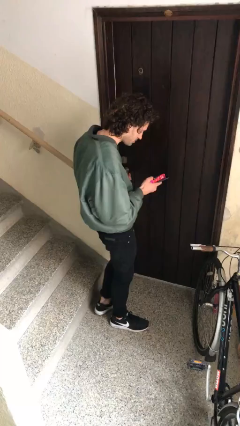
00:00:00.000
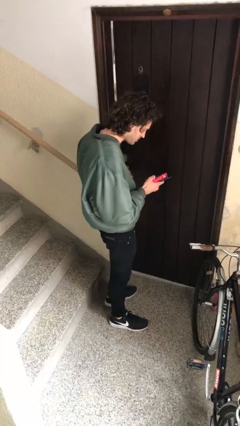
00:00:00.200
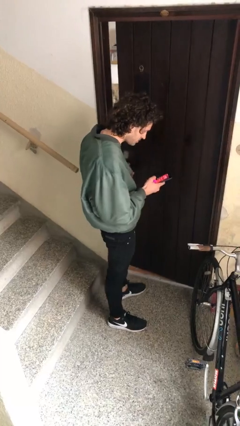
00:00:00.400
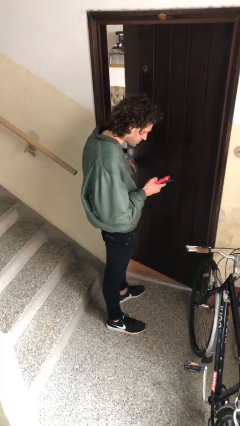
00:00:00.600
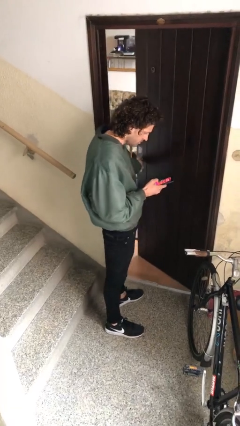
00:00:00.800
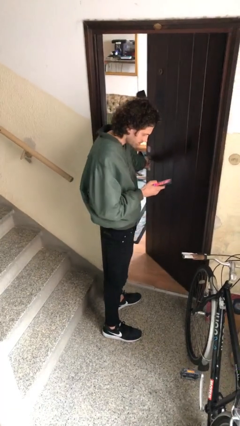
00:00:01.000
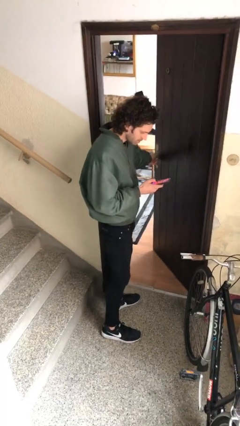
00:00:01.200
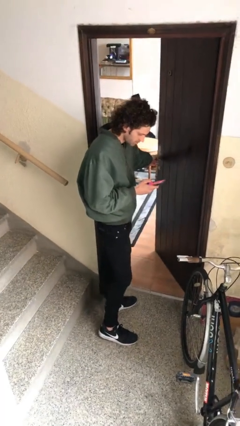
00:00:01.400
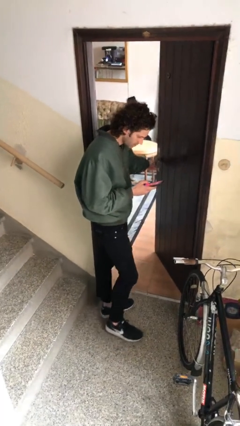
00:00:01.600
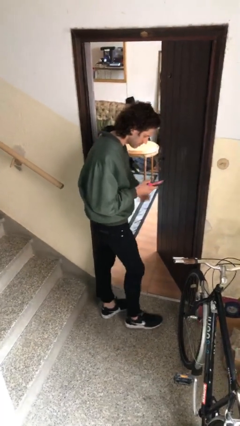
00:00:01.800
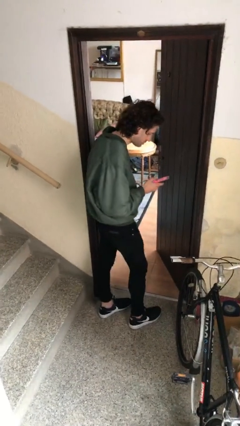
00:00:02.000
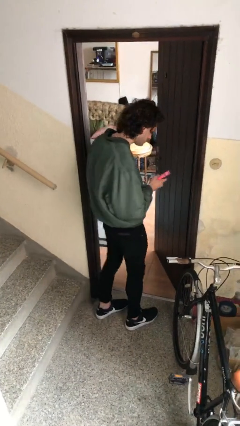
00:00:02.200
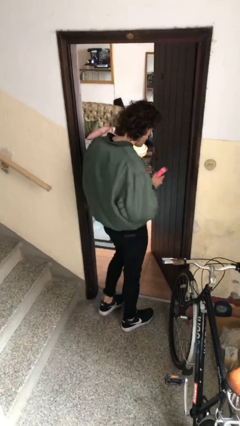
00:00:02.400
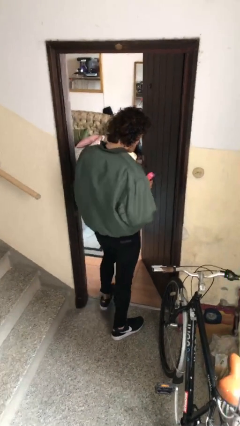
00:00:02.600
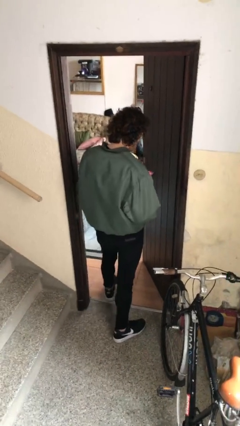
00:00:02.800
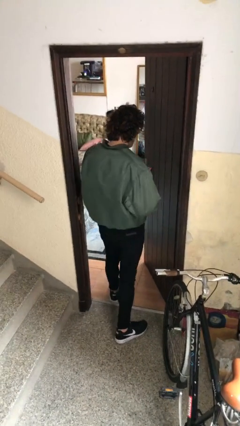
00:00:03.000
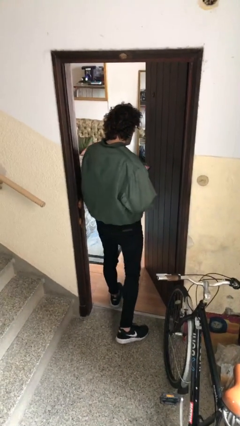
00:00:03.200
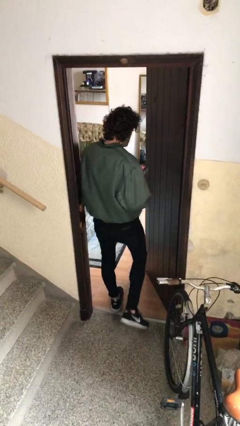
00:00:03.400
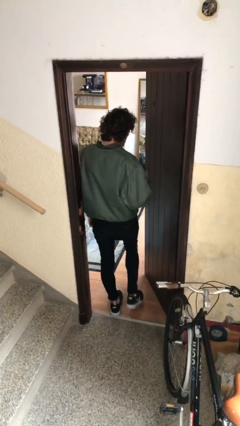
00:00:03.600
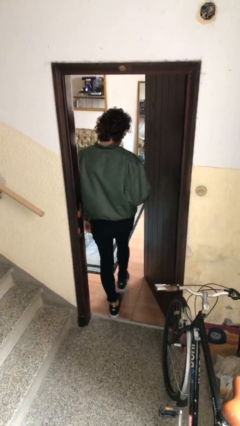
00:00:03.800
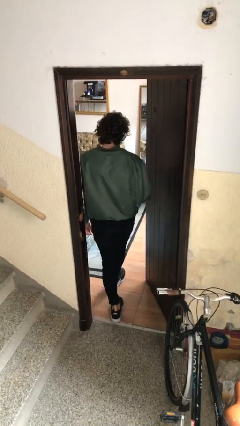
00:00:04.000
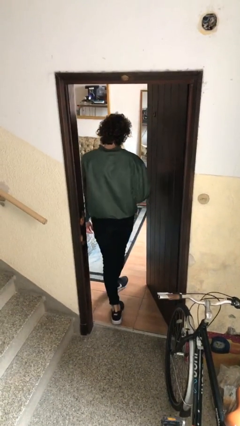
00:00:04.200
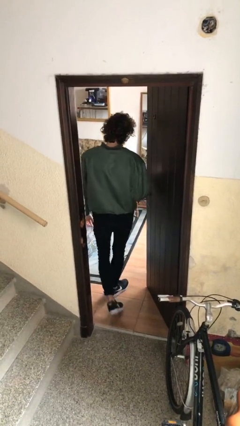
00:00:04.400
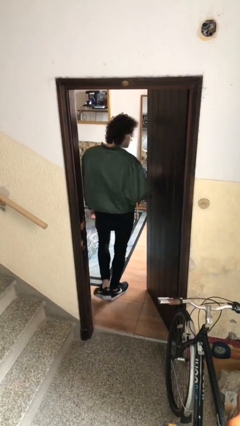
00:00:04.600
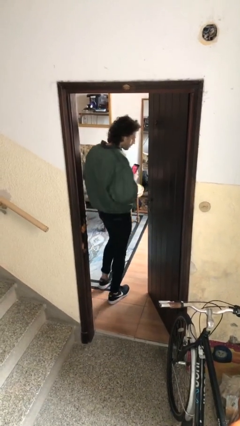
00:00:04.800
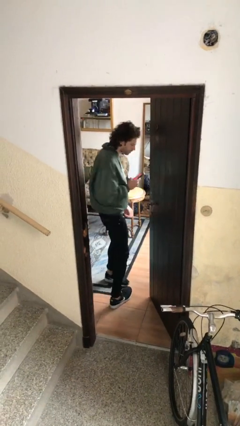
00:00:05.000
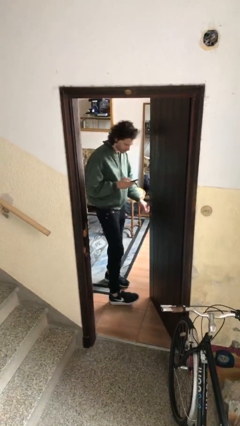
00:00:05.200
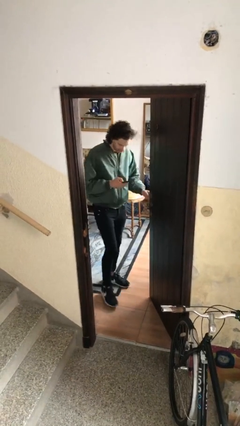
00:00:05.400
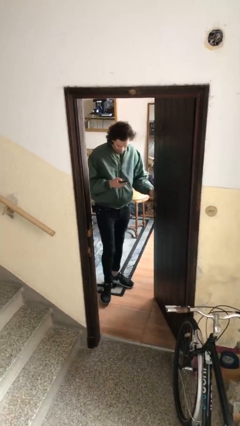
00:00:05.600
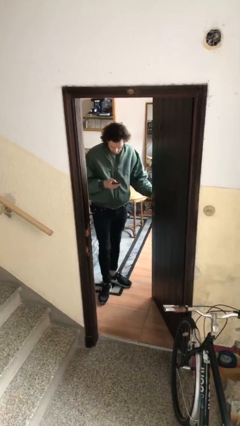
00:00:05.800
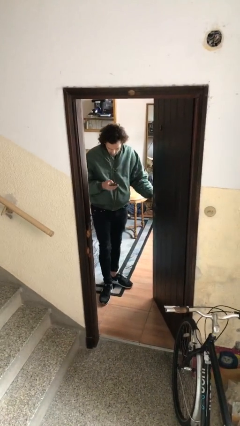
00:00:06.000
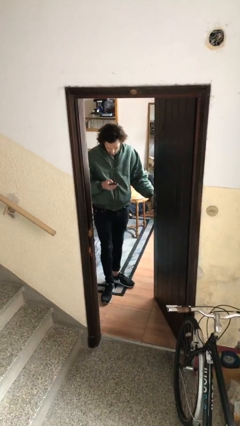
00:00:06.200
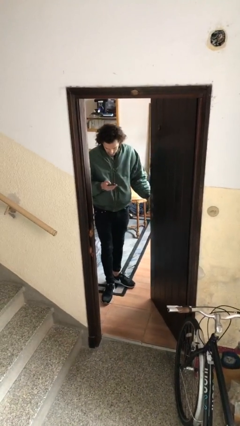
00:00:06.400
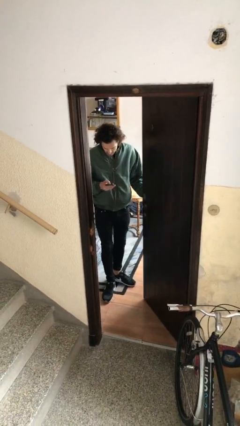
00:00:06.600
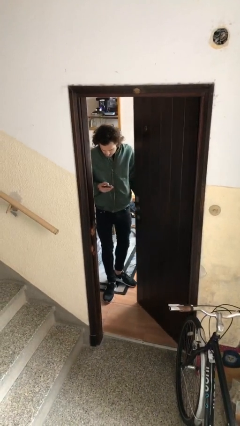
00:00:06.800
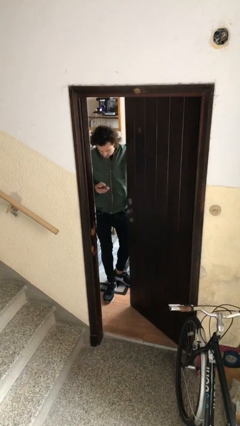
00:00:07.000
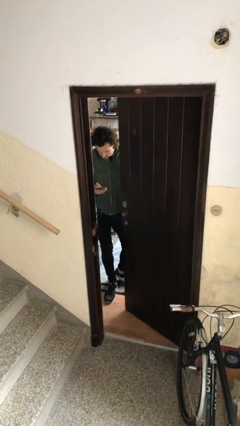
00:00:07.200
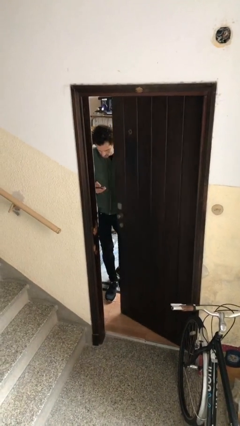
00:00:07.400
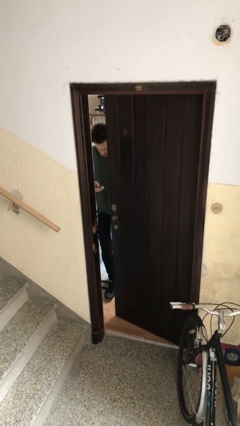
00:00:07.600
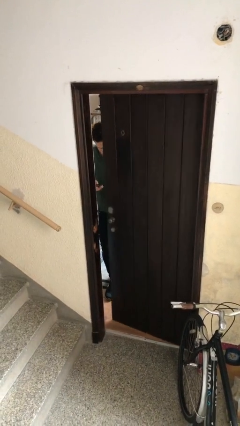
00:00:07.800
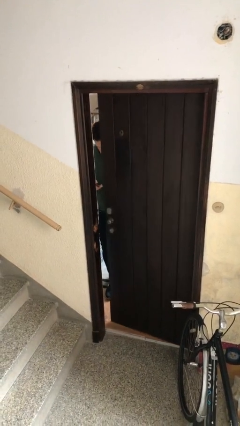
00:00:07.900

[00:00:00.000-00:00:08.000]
person texts on phone

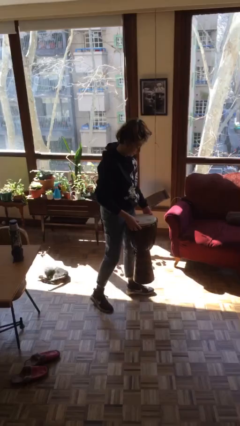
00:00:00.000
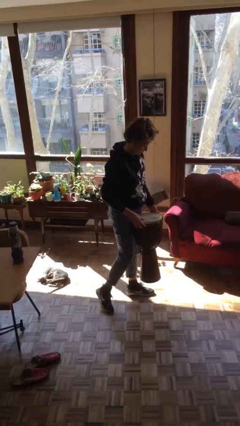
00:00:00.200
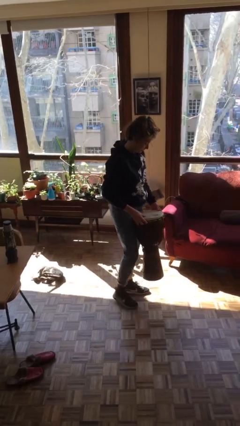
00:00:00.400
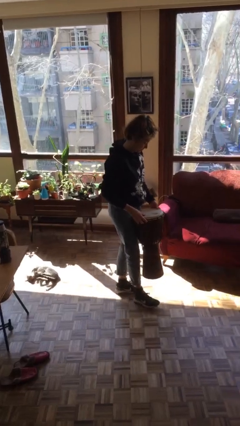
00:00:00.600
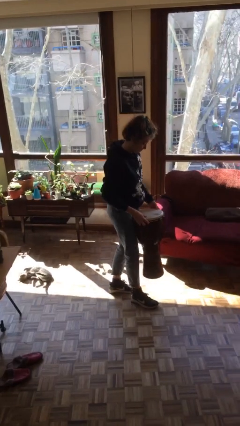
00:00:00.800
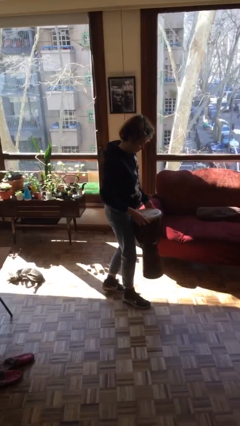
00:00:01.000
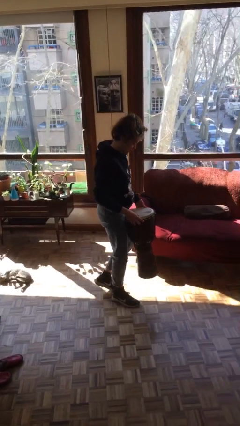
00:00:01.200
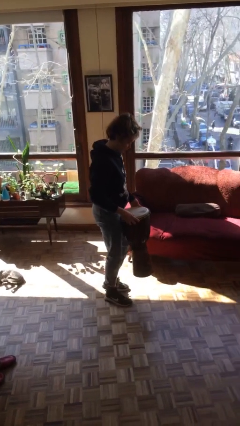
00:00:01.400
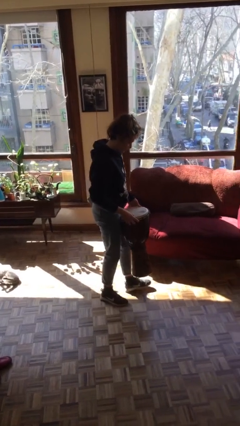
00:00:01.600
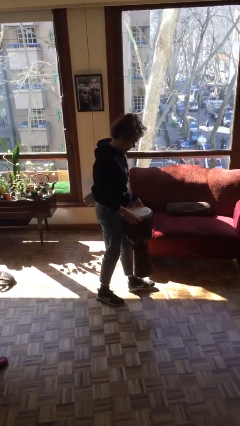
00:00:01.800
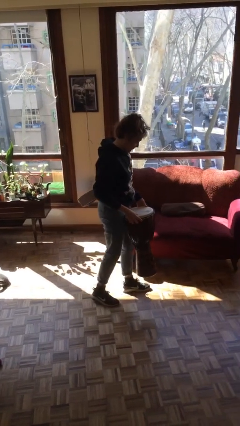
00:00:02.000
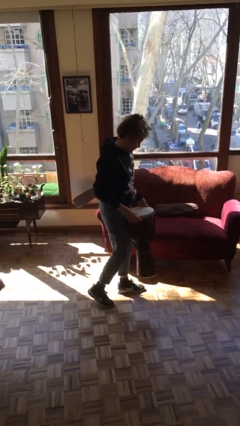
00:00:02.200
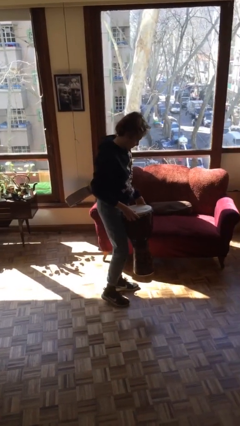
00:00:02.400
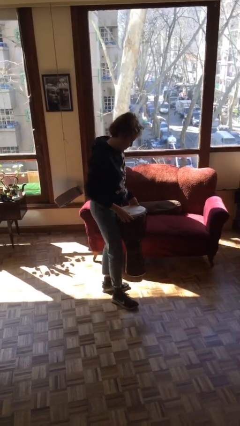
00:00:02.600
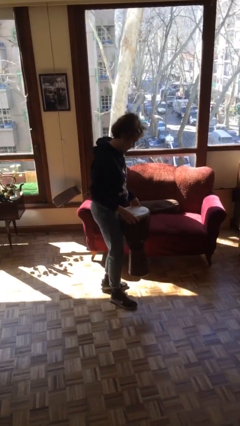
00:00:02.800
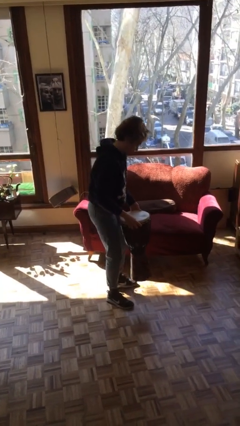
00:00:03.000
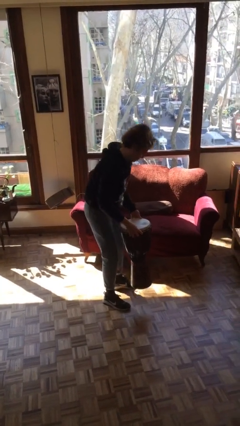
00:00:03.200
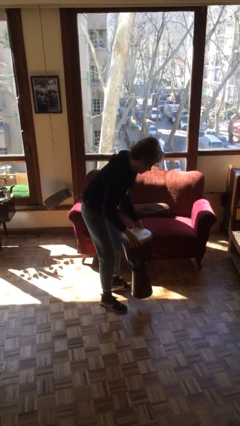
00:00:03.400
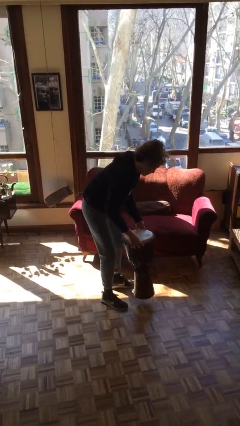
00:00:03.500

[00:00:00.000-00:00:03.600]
person carries heavy object

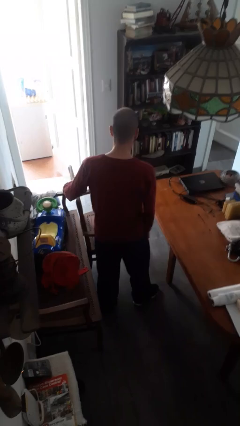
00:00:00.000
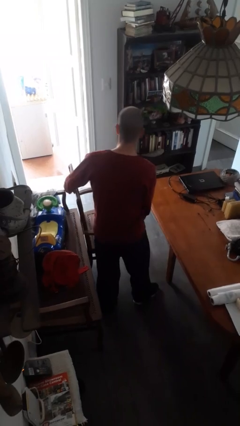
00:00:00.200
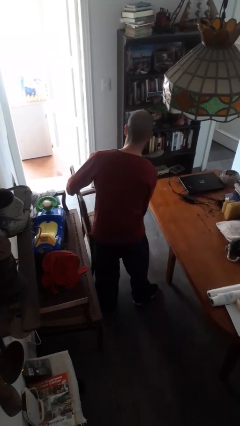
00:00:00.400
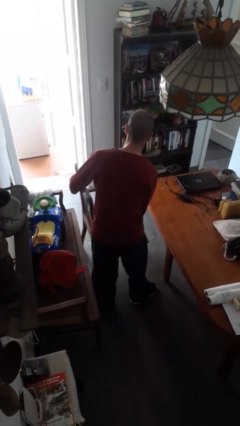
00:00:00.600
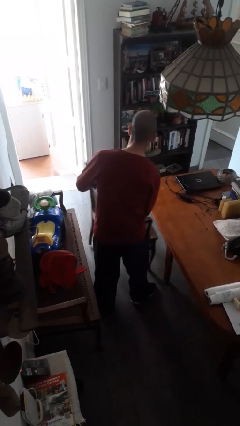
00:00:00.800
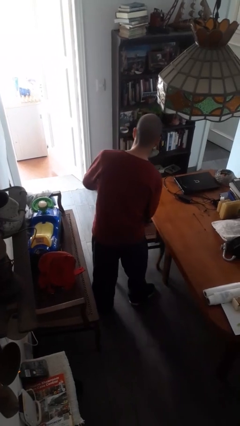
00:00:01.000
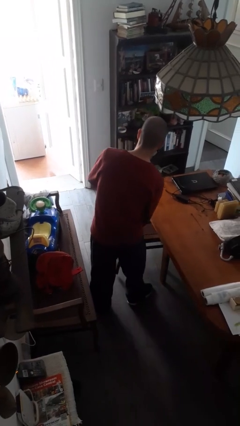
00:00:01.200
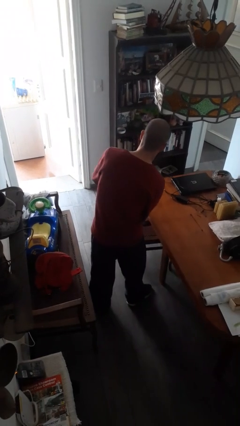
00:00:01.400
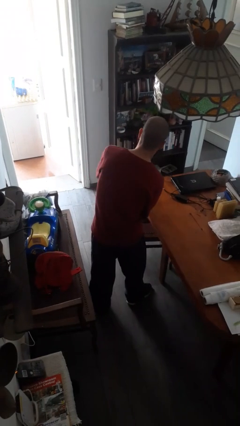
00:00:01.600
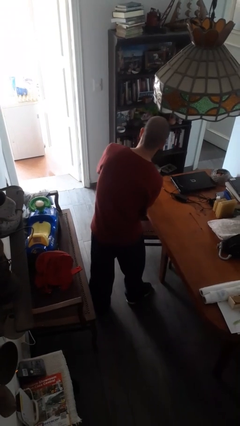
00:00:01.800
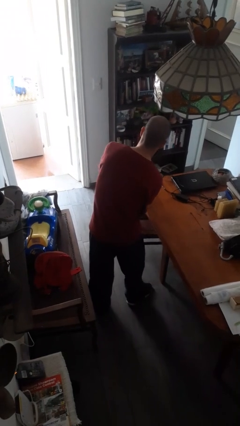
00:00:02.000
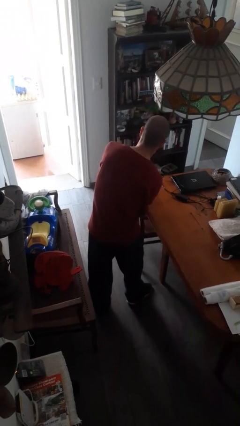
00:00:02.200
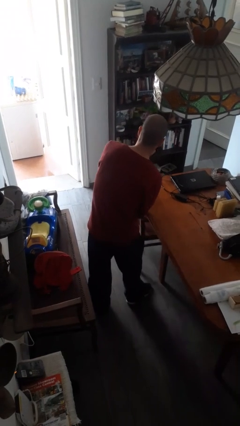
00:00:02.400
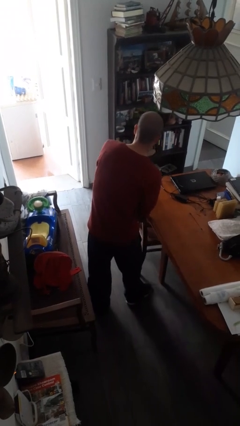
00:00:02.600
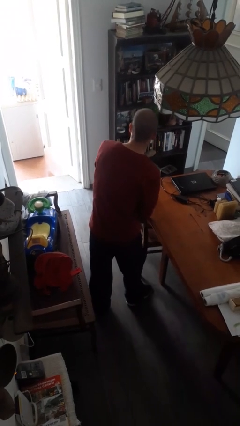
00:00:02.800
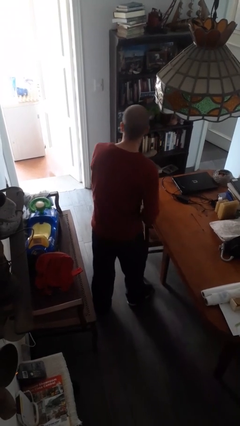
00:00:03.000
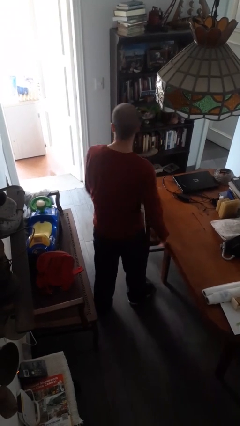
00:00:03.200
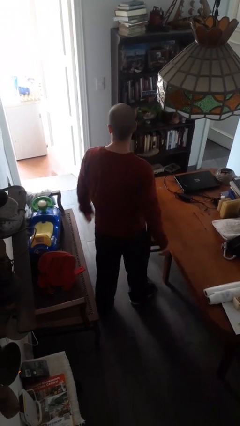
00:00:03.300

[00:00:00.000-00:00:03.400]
person pushes in chair

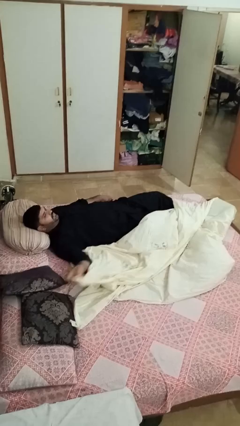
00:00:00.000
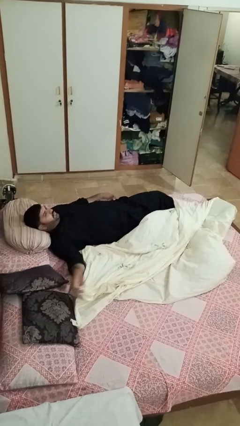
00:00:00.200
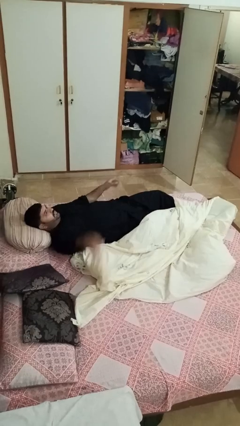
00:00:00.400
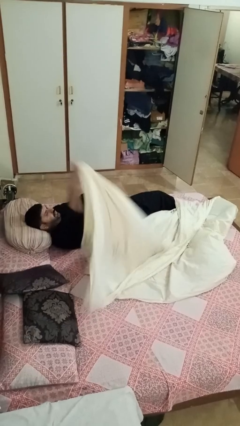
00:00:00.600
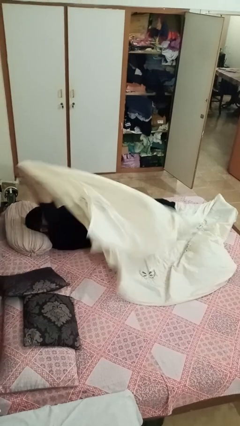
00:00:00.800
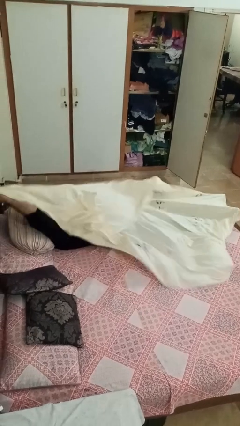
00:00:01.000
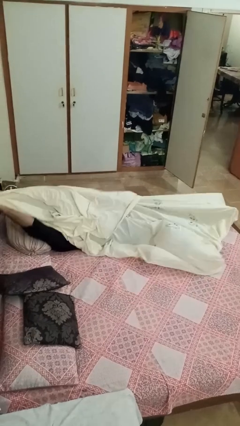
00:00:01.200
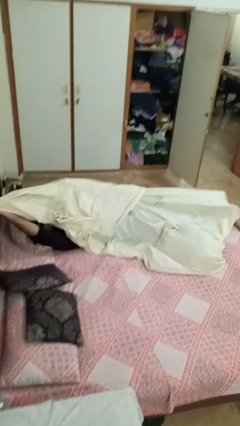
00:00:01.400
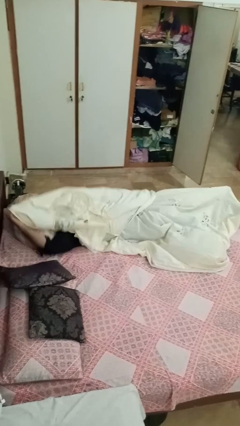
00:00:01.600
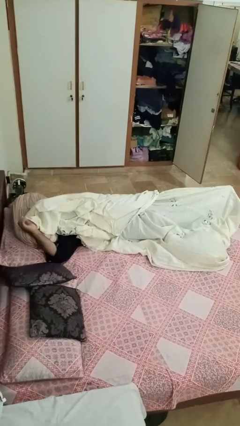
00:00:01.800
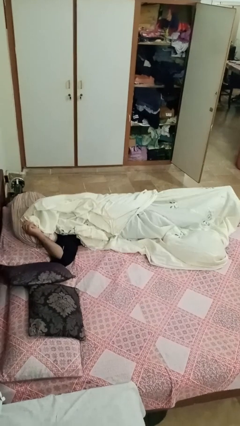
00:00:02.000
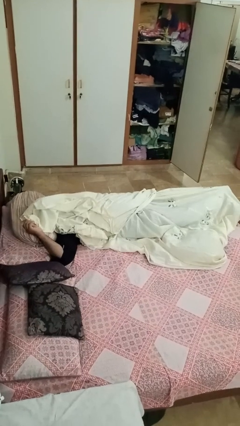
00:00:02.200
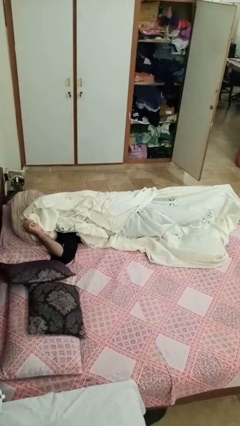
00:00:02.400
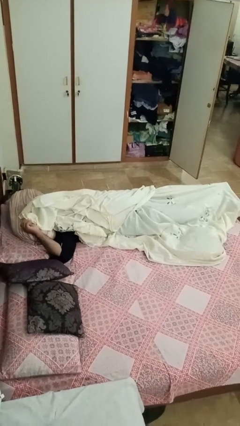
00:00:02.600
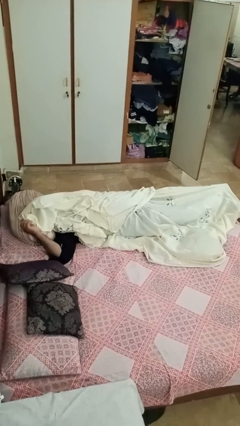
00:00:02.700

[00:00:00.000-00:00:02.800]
person covers with bedsheets
